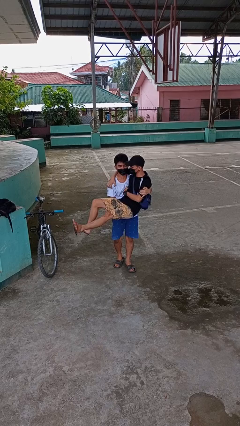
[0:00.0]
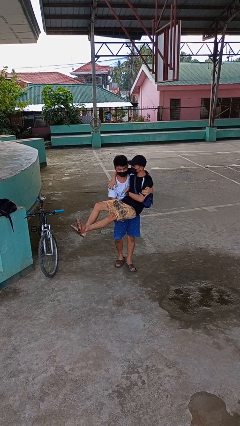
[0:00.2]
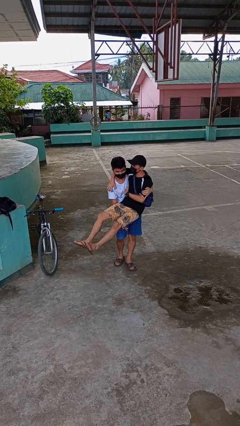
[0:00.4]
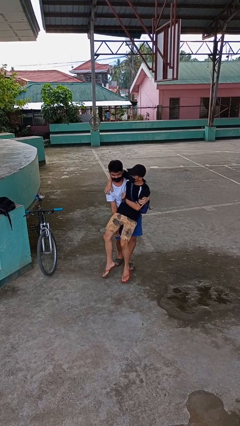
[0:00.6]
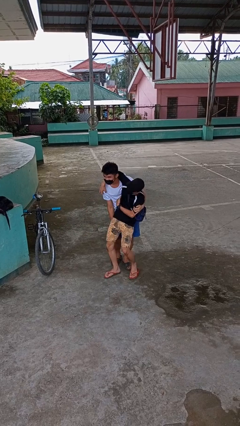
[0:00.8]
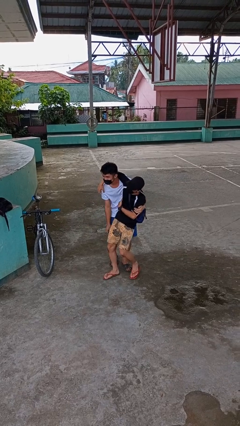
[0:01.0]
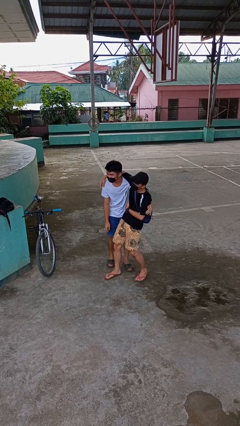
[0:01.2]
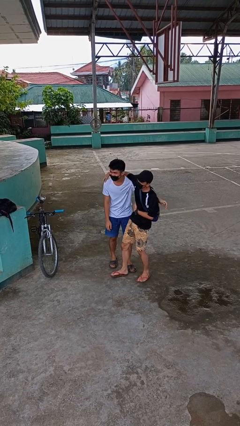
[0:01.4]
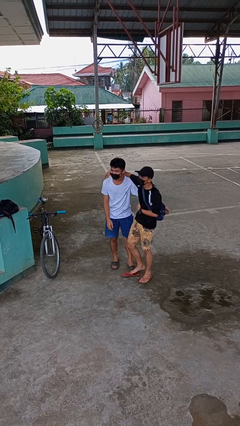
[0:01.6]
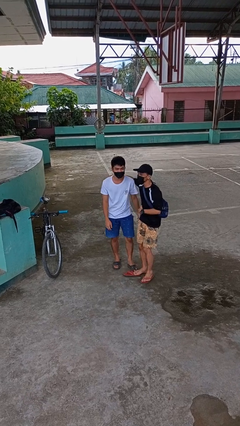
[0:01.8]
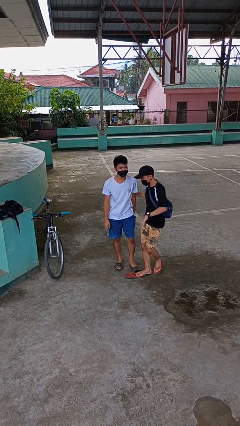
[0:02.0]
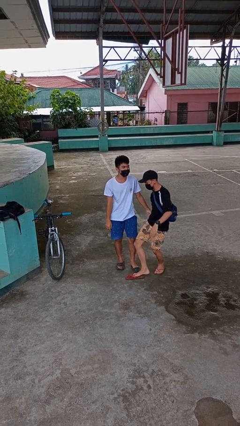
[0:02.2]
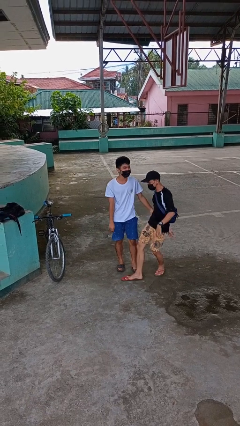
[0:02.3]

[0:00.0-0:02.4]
person puts down person

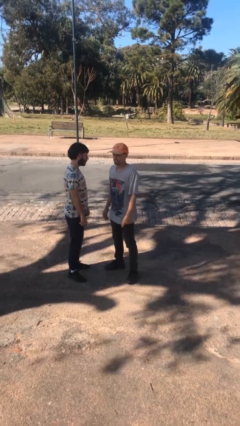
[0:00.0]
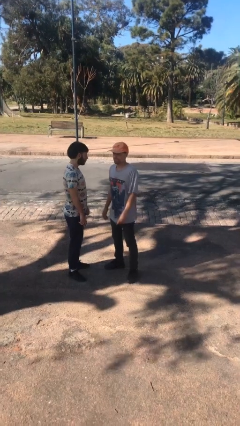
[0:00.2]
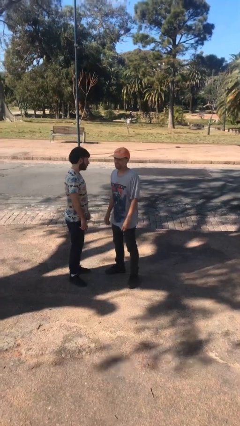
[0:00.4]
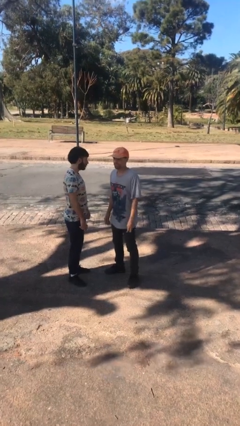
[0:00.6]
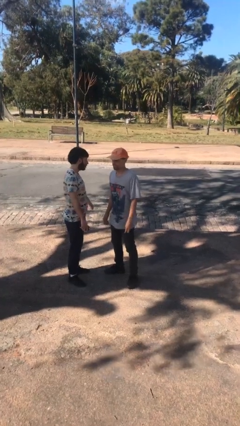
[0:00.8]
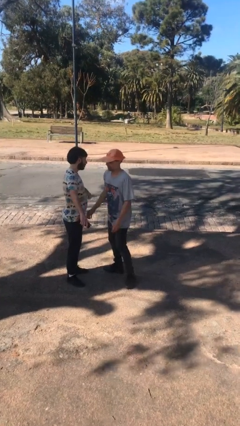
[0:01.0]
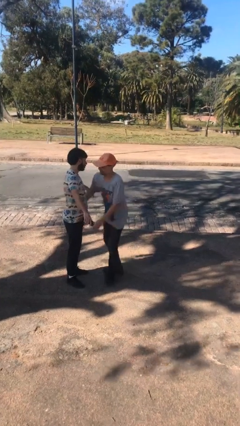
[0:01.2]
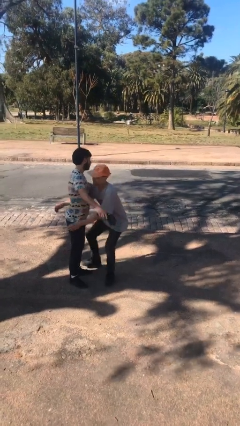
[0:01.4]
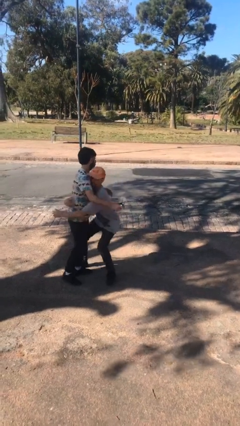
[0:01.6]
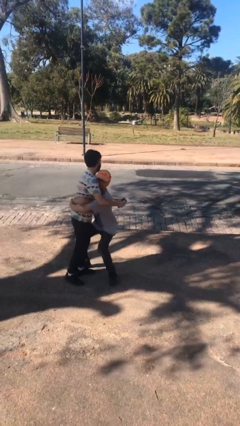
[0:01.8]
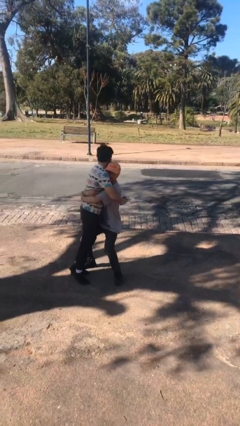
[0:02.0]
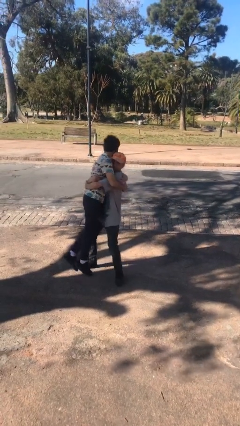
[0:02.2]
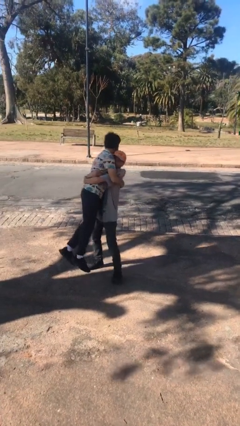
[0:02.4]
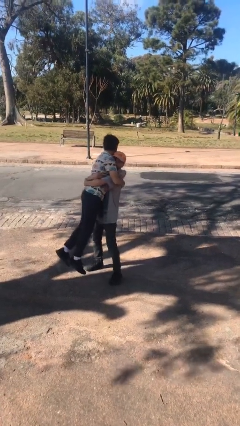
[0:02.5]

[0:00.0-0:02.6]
person picks up person

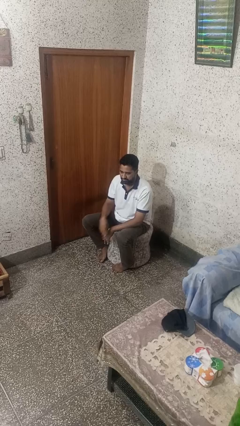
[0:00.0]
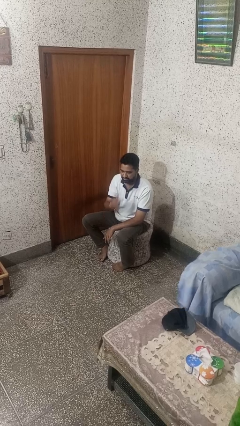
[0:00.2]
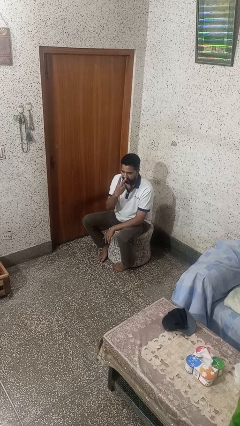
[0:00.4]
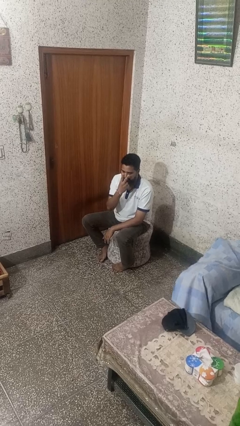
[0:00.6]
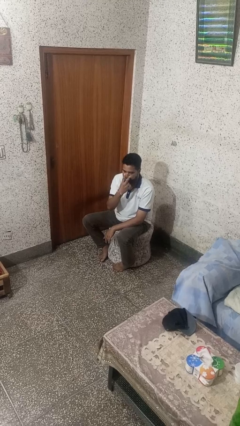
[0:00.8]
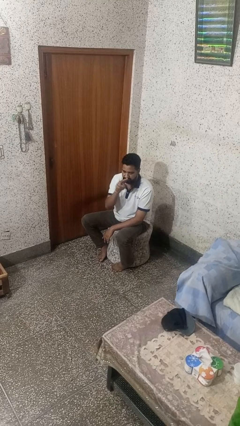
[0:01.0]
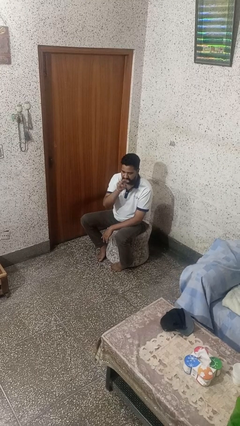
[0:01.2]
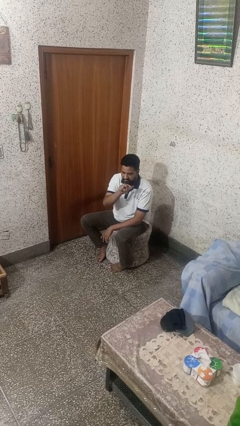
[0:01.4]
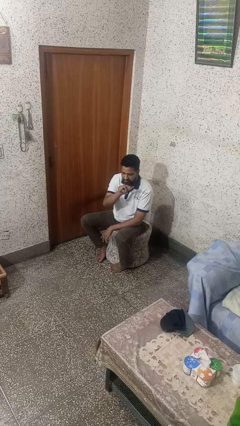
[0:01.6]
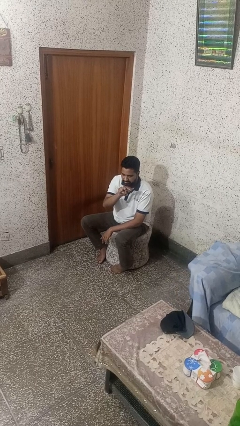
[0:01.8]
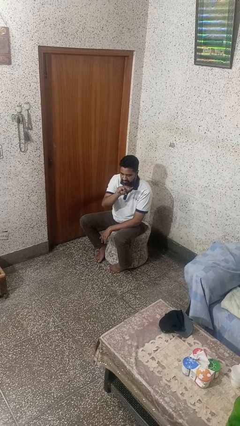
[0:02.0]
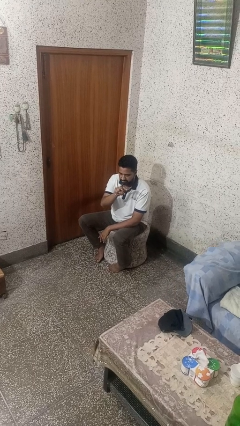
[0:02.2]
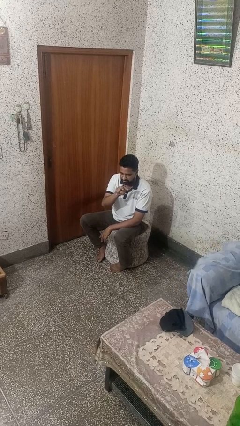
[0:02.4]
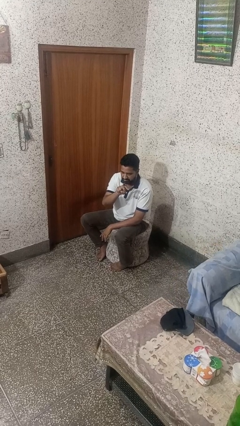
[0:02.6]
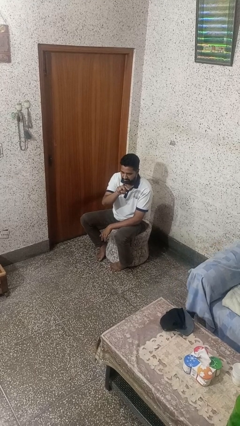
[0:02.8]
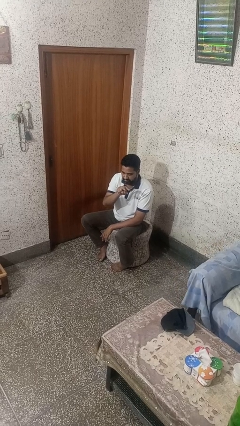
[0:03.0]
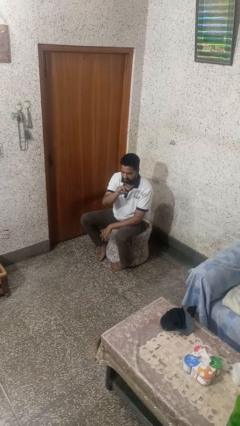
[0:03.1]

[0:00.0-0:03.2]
person gestures watch closely

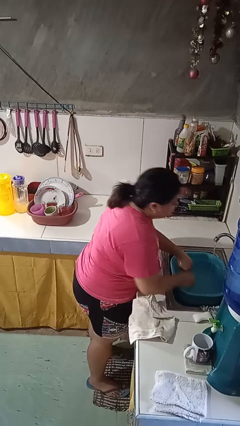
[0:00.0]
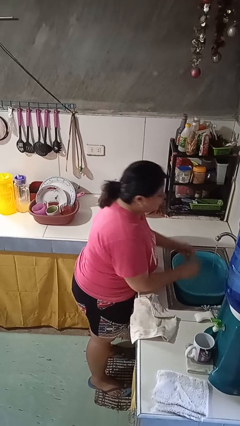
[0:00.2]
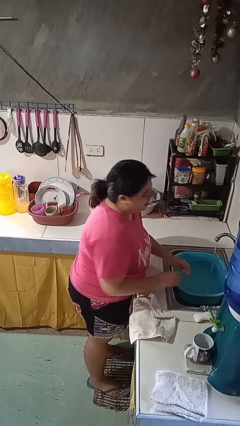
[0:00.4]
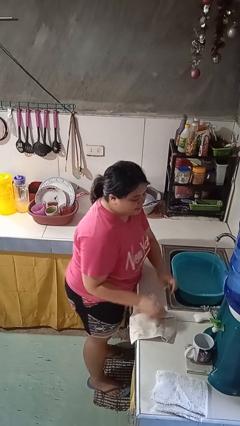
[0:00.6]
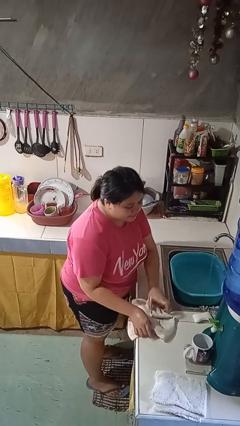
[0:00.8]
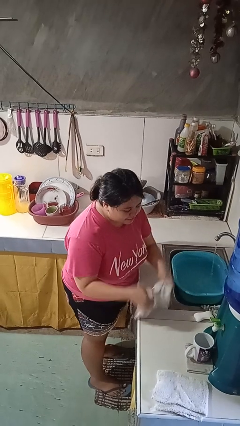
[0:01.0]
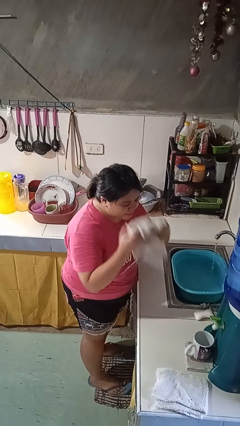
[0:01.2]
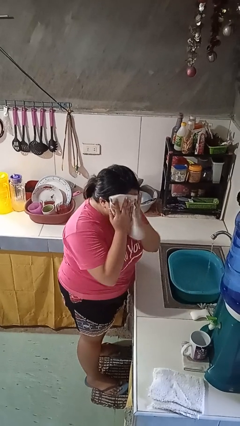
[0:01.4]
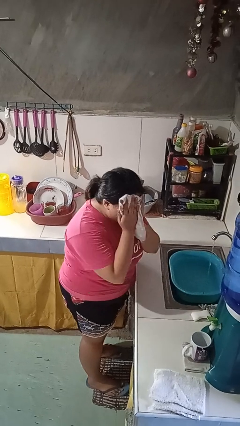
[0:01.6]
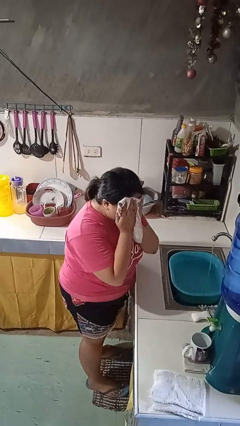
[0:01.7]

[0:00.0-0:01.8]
person dries face with towel

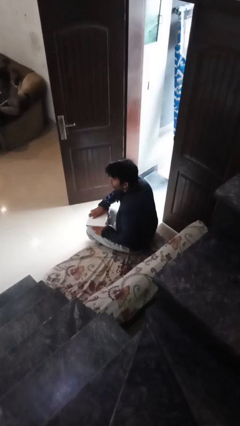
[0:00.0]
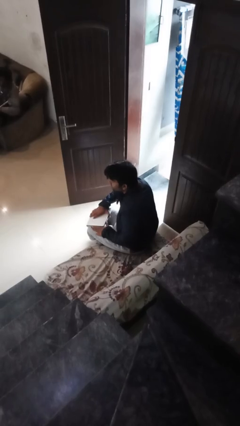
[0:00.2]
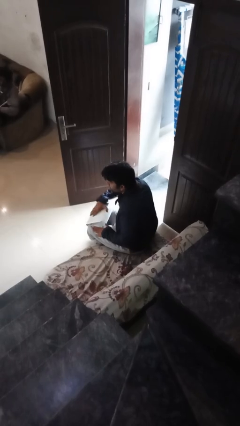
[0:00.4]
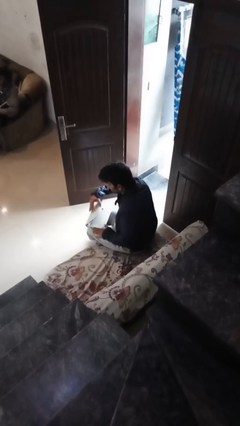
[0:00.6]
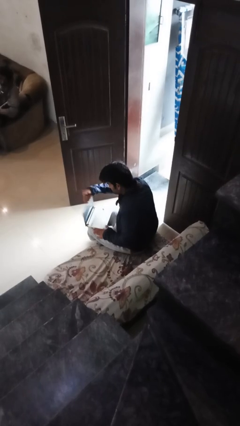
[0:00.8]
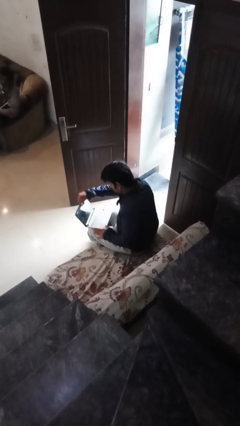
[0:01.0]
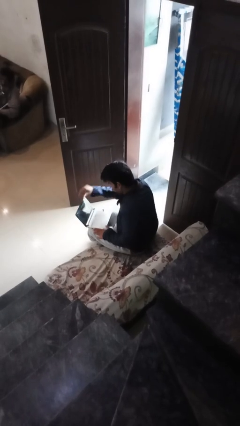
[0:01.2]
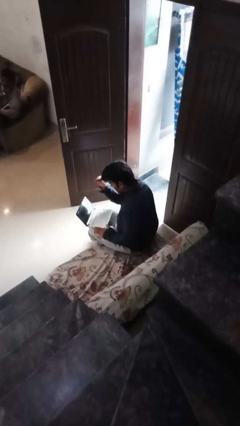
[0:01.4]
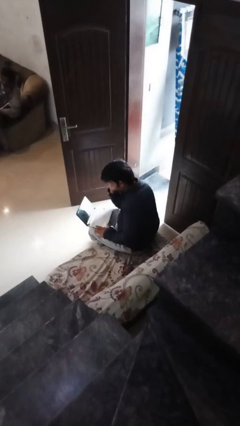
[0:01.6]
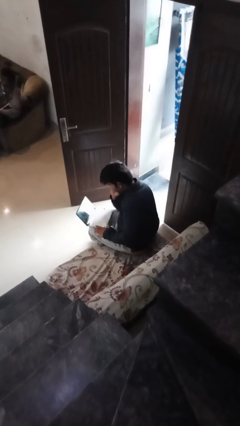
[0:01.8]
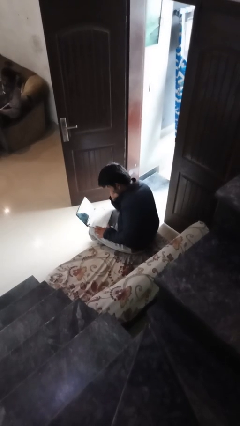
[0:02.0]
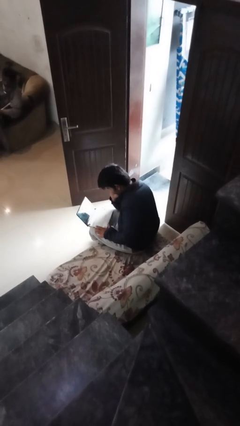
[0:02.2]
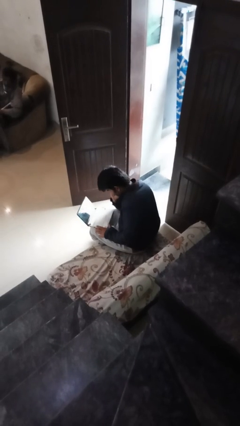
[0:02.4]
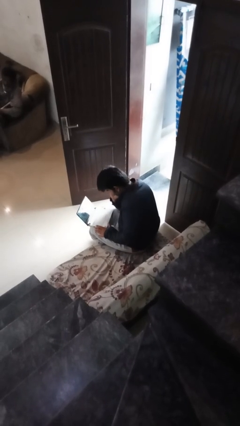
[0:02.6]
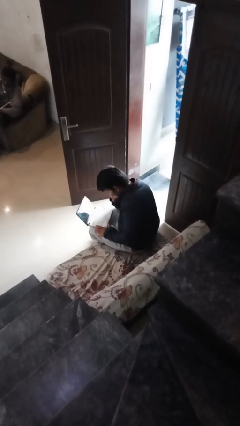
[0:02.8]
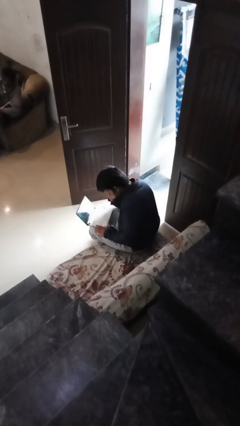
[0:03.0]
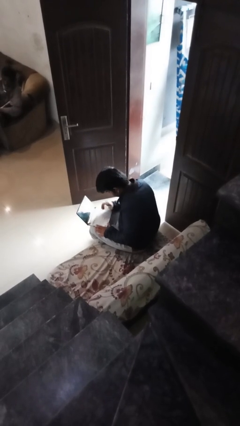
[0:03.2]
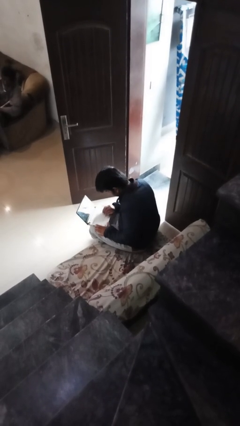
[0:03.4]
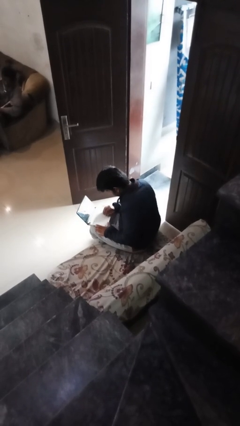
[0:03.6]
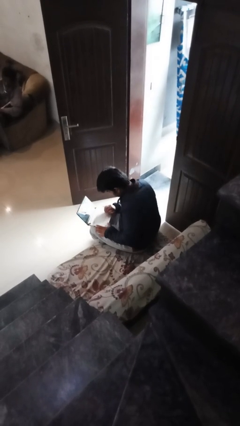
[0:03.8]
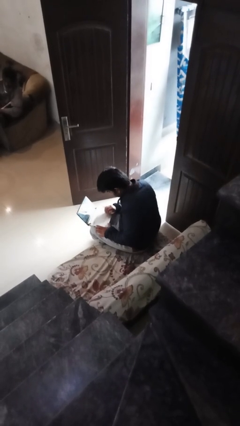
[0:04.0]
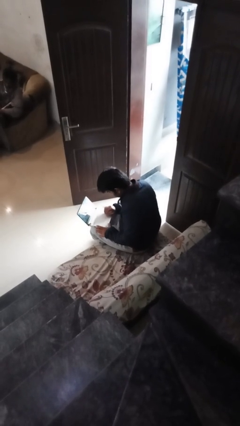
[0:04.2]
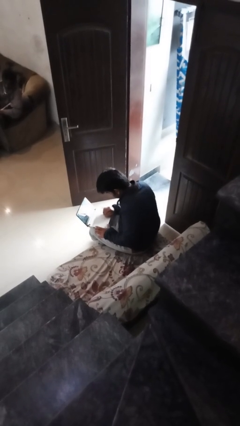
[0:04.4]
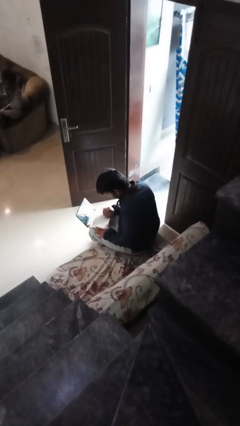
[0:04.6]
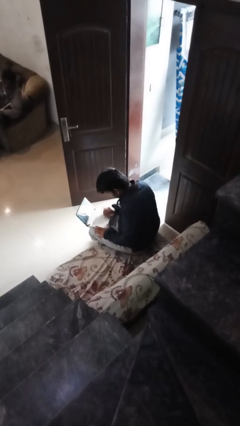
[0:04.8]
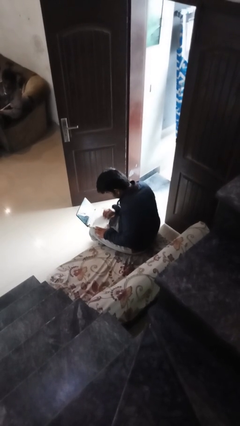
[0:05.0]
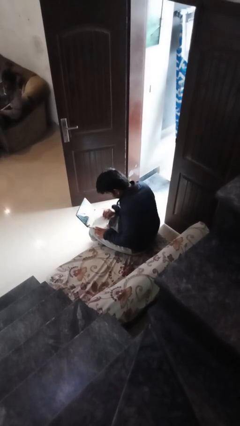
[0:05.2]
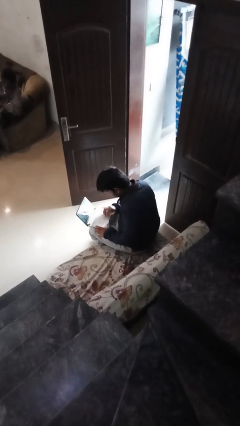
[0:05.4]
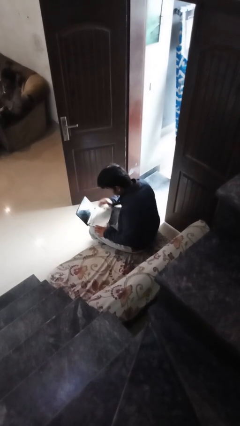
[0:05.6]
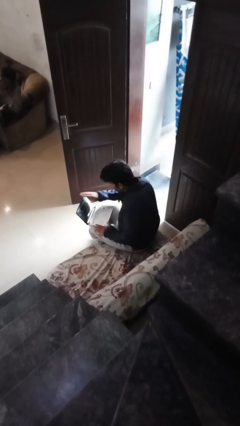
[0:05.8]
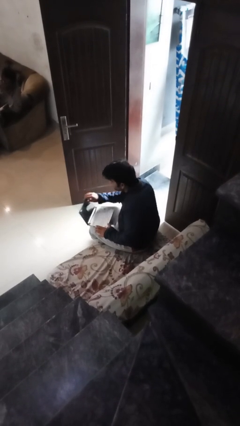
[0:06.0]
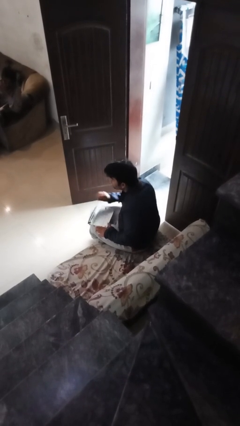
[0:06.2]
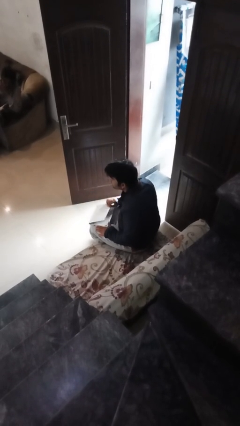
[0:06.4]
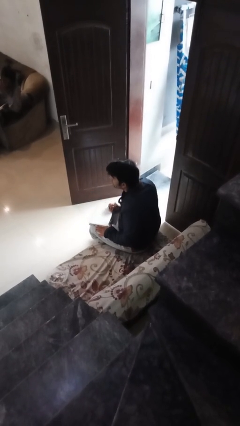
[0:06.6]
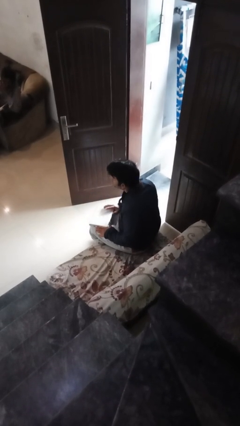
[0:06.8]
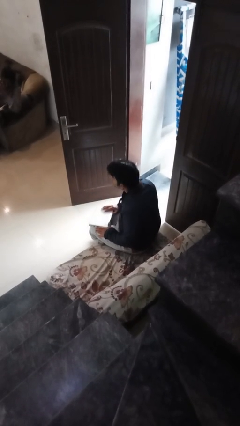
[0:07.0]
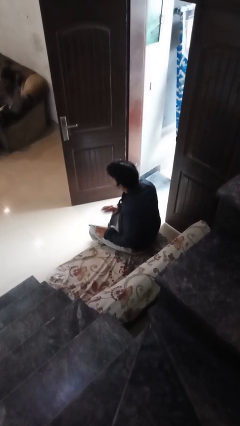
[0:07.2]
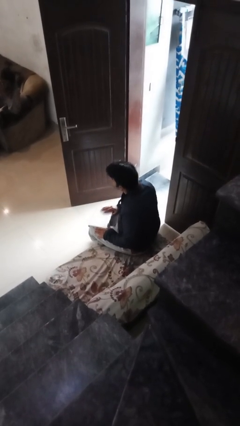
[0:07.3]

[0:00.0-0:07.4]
person interacts with laptop

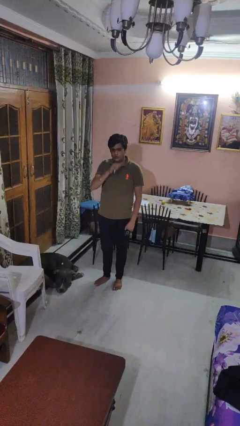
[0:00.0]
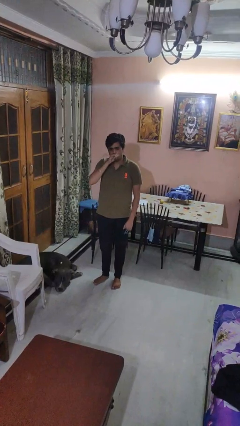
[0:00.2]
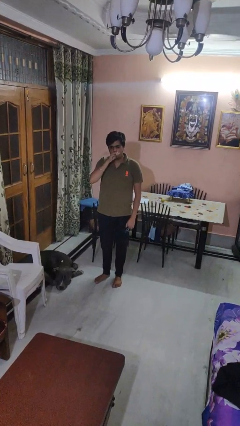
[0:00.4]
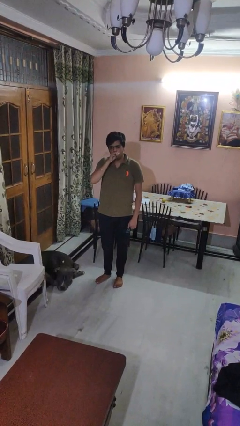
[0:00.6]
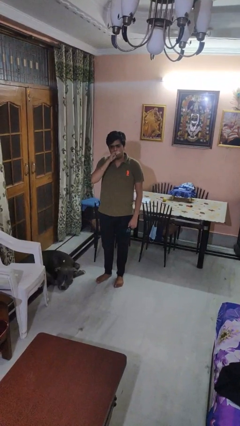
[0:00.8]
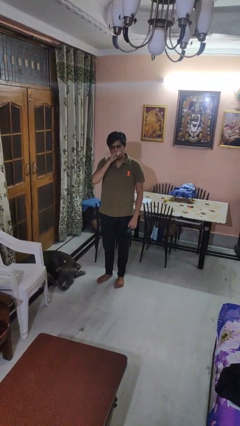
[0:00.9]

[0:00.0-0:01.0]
person vapes
